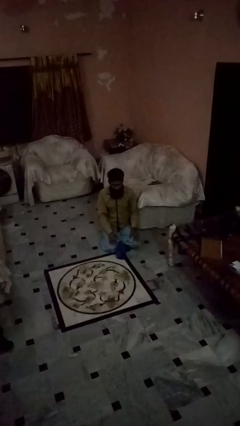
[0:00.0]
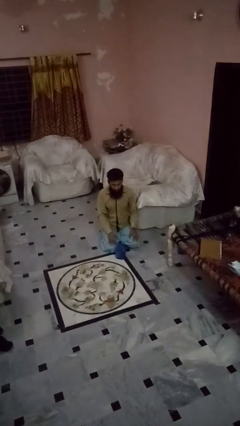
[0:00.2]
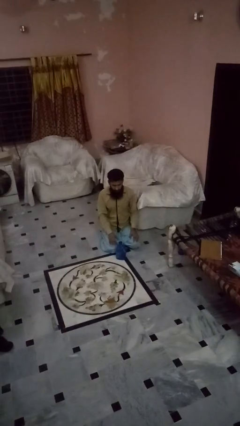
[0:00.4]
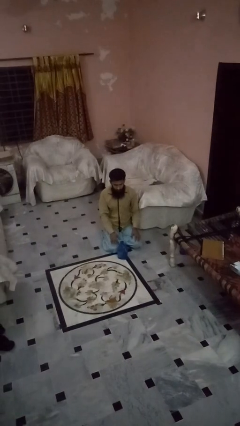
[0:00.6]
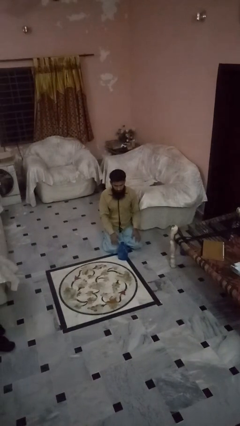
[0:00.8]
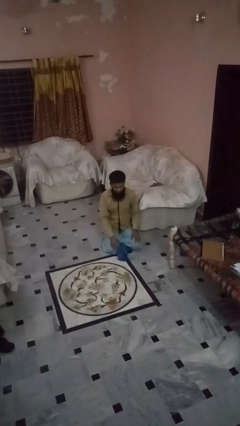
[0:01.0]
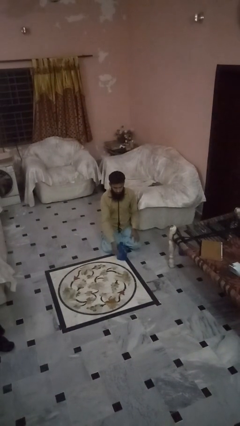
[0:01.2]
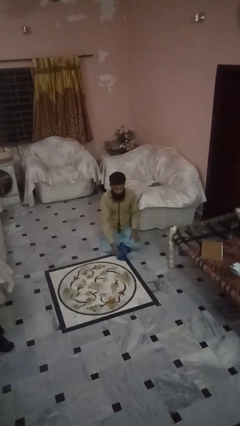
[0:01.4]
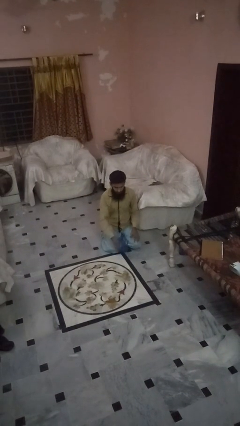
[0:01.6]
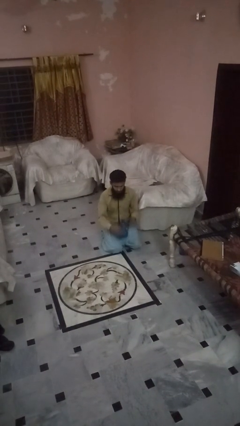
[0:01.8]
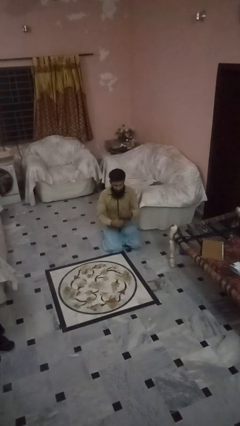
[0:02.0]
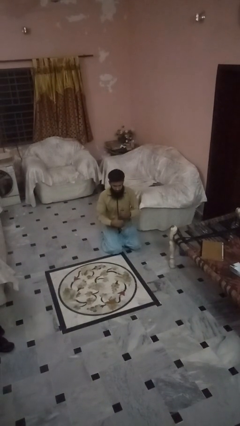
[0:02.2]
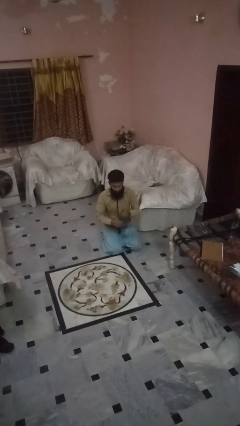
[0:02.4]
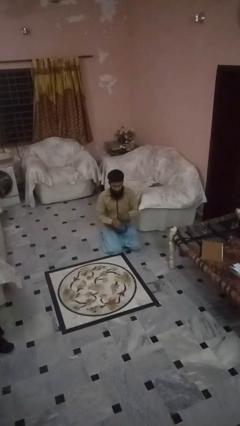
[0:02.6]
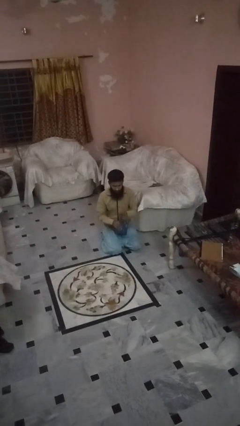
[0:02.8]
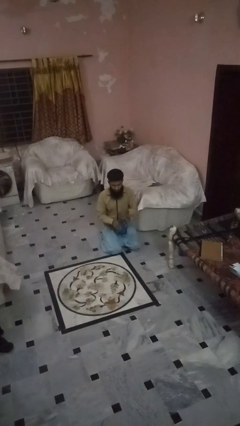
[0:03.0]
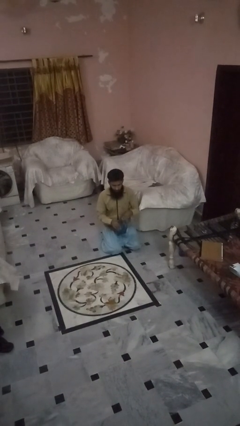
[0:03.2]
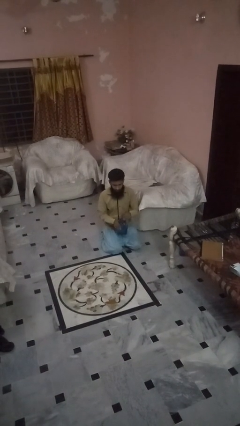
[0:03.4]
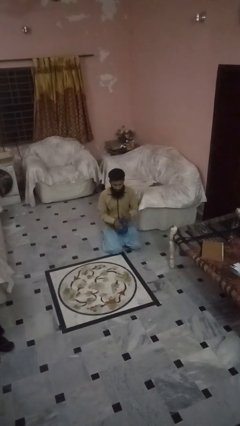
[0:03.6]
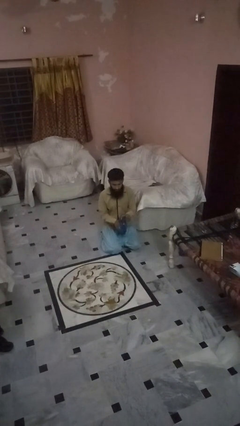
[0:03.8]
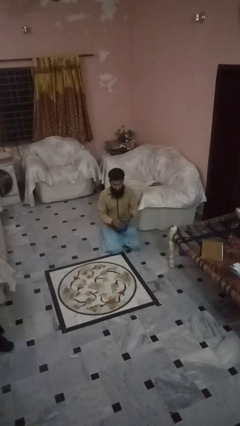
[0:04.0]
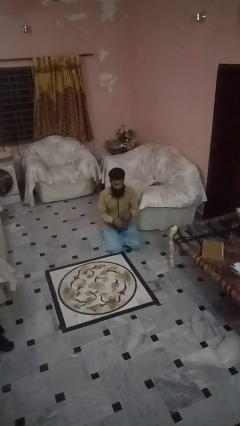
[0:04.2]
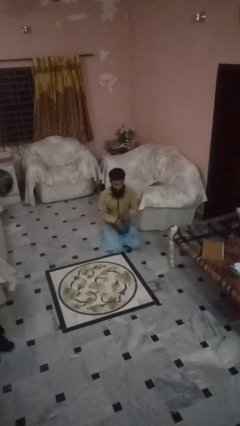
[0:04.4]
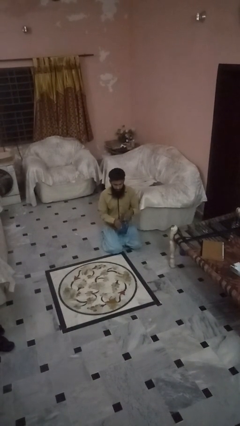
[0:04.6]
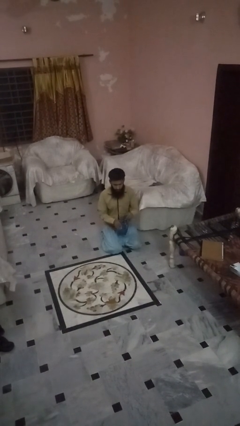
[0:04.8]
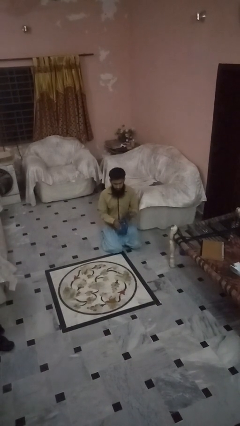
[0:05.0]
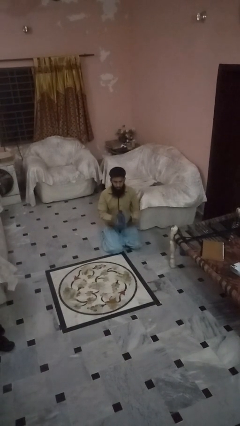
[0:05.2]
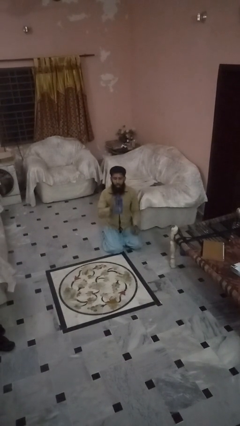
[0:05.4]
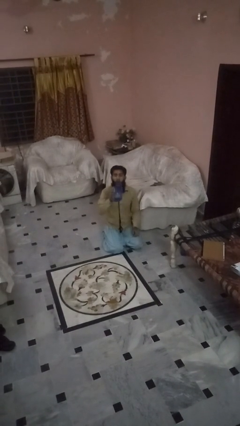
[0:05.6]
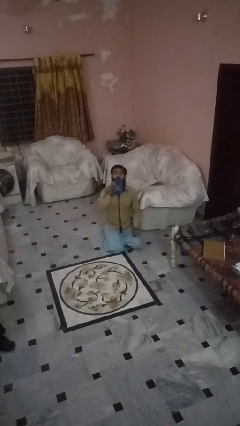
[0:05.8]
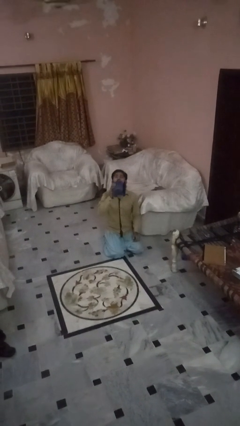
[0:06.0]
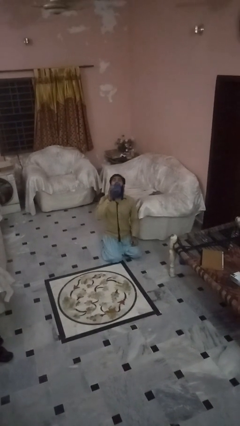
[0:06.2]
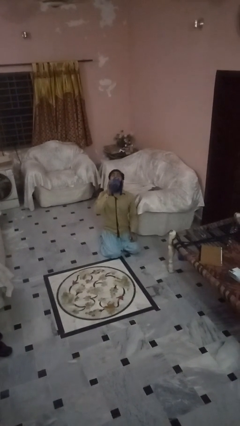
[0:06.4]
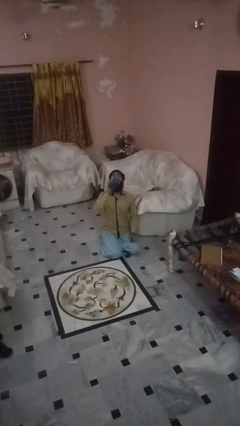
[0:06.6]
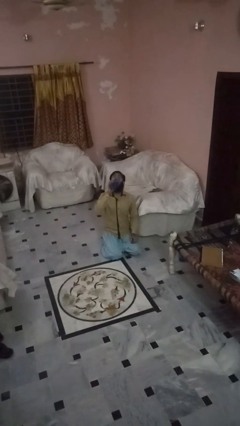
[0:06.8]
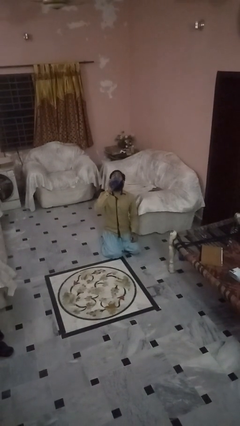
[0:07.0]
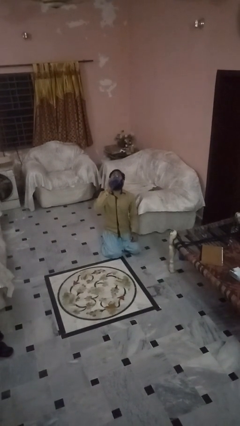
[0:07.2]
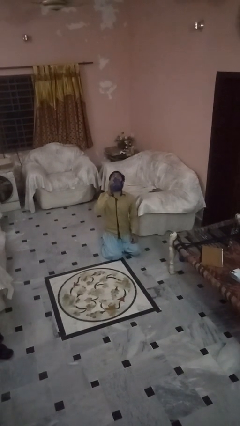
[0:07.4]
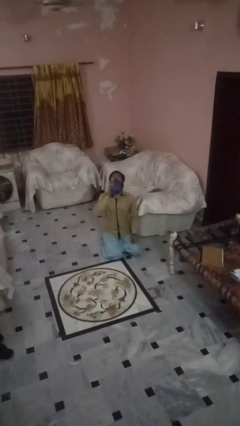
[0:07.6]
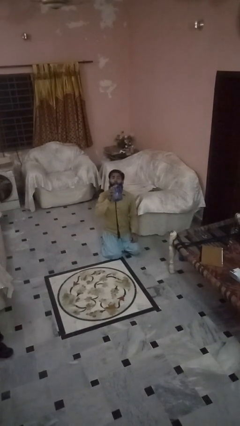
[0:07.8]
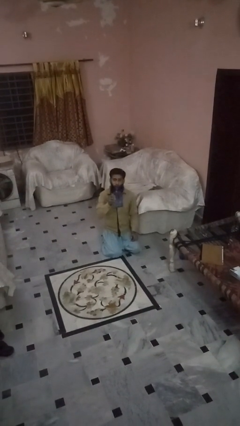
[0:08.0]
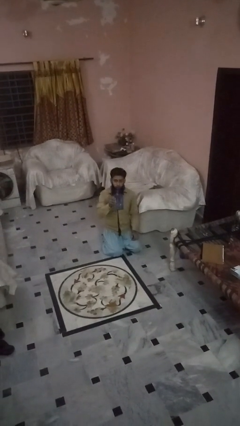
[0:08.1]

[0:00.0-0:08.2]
person drinks from bottle

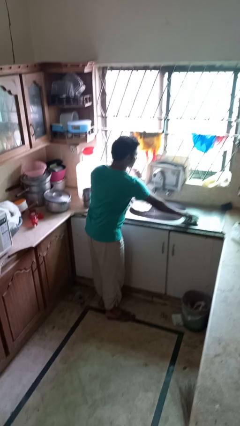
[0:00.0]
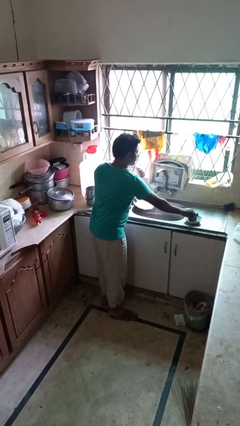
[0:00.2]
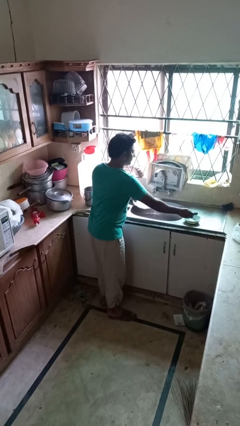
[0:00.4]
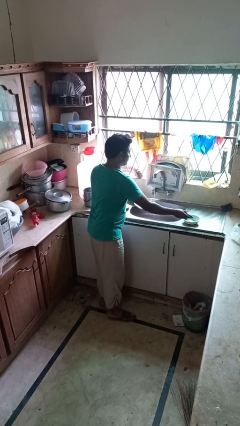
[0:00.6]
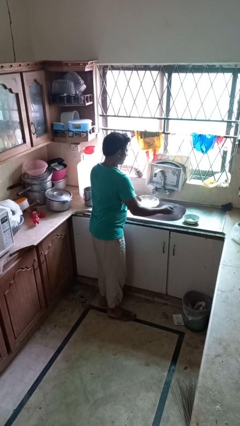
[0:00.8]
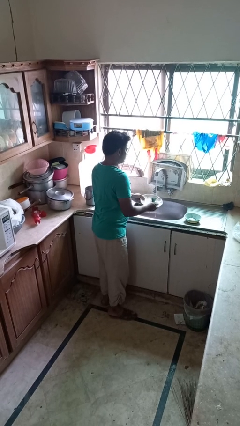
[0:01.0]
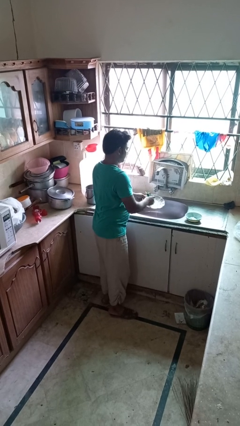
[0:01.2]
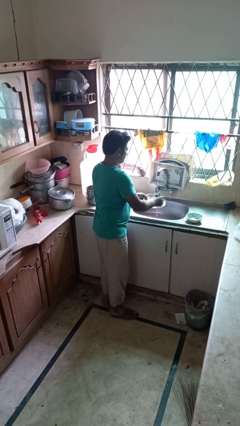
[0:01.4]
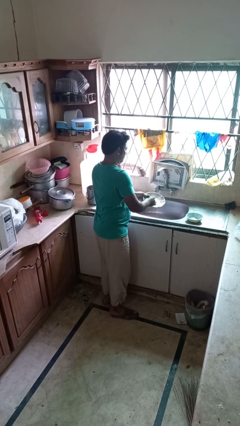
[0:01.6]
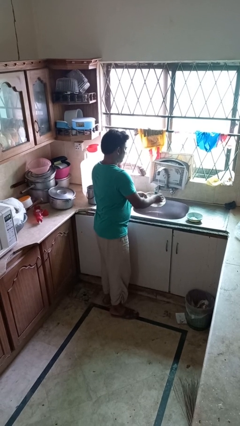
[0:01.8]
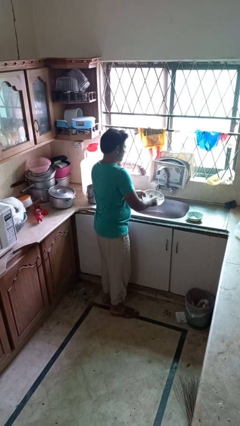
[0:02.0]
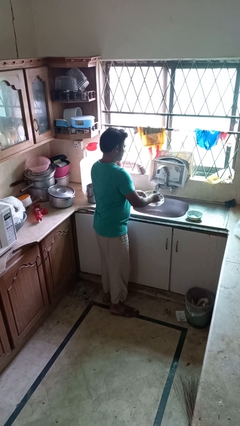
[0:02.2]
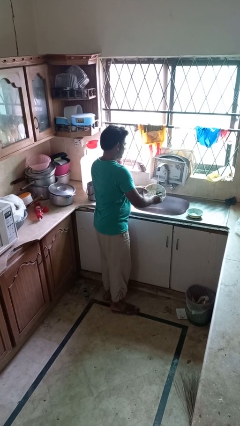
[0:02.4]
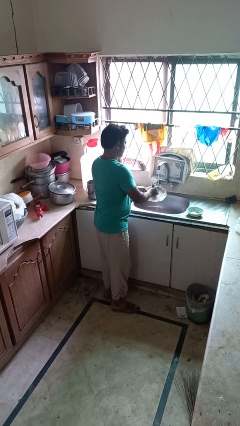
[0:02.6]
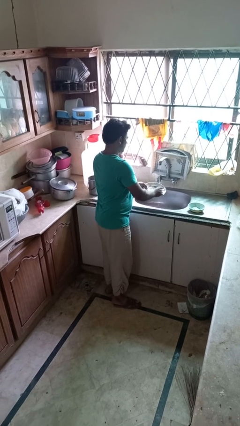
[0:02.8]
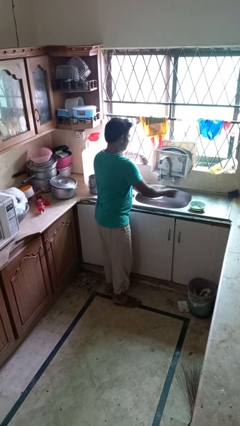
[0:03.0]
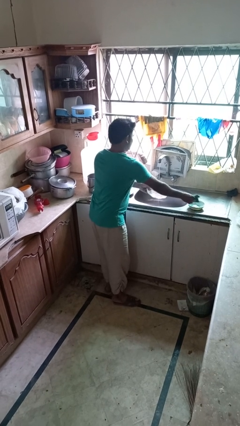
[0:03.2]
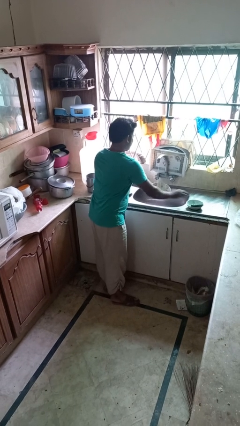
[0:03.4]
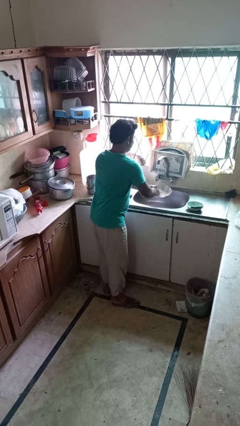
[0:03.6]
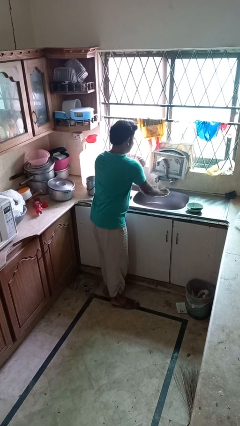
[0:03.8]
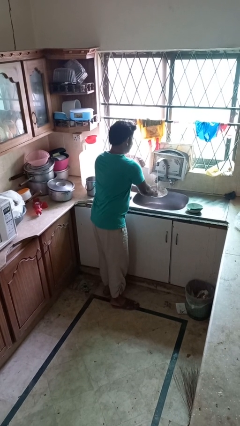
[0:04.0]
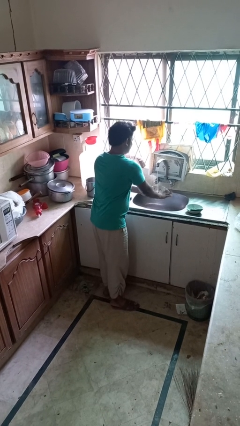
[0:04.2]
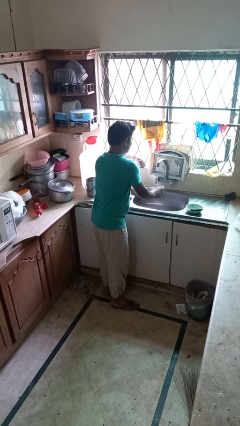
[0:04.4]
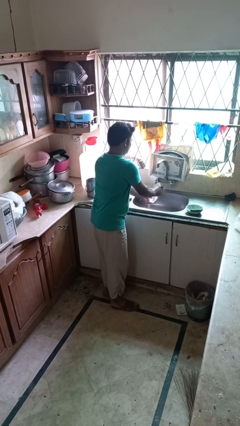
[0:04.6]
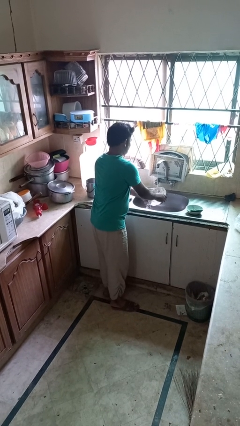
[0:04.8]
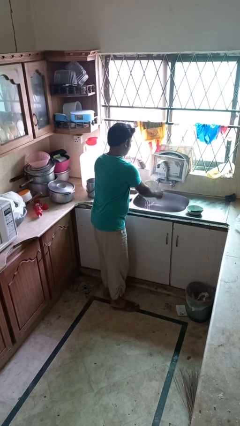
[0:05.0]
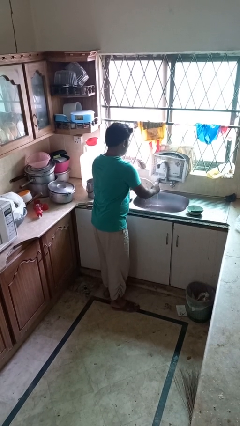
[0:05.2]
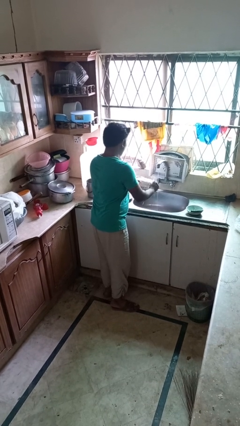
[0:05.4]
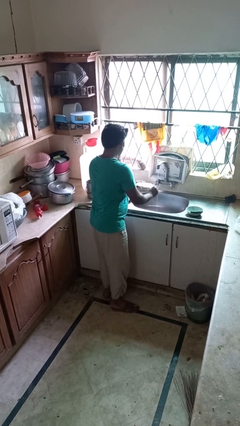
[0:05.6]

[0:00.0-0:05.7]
person washes dish

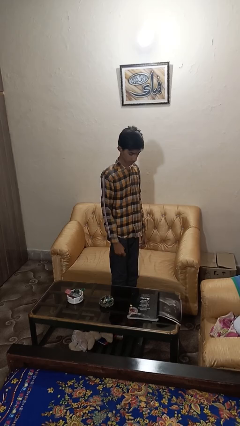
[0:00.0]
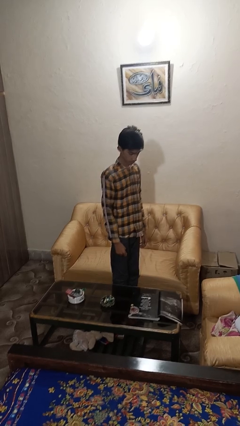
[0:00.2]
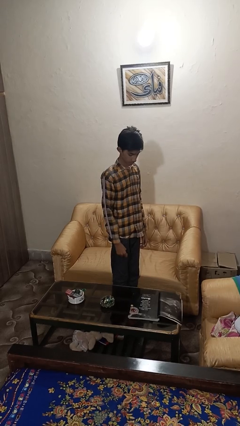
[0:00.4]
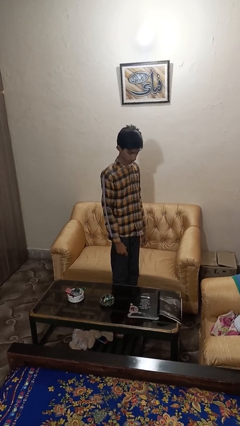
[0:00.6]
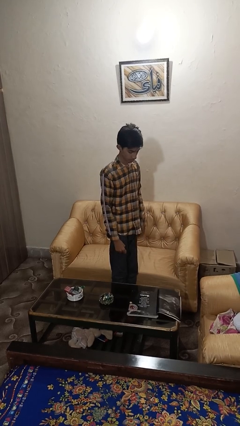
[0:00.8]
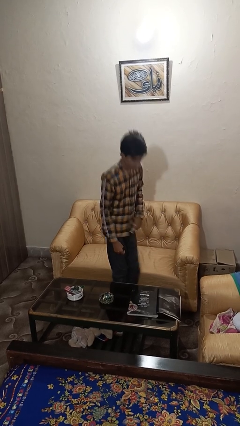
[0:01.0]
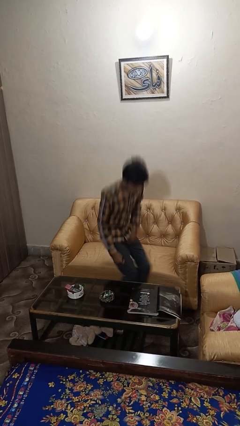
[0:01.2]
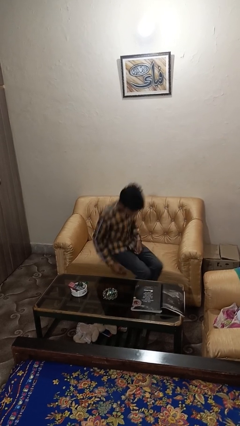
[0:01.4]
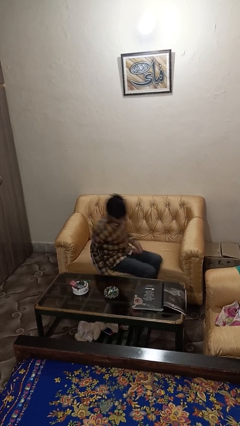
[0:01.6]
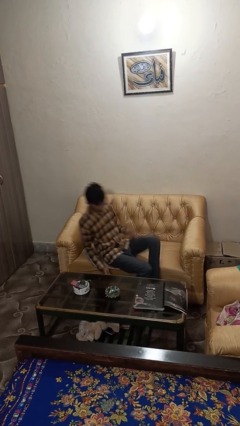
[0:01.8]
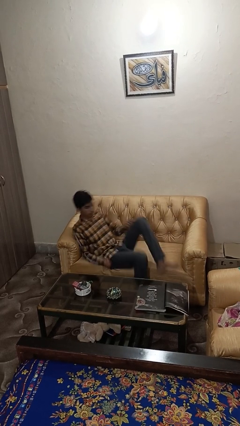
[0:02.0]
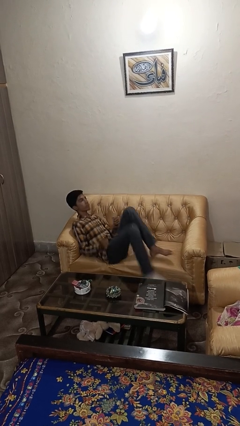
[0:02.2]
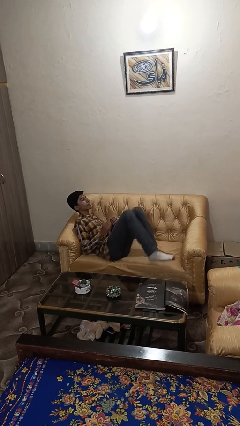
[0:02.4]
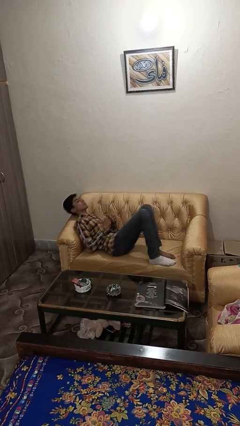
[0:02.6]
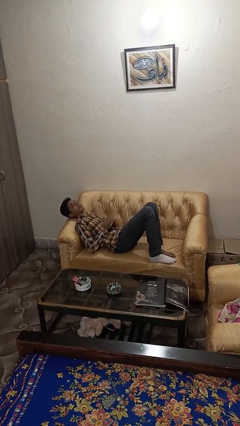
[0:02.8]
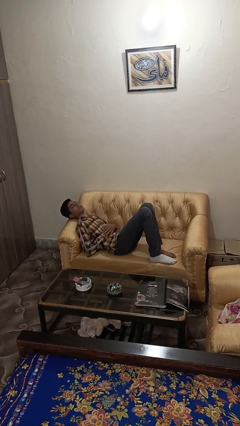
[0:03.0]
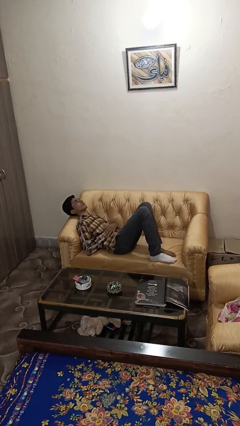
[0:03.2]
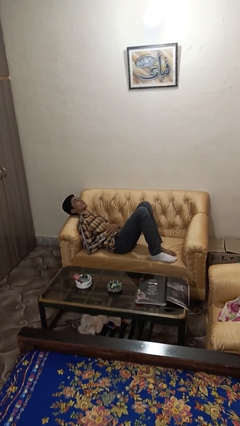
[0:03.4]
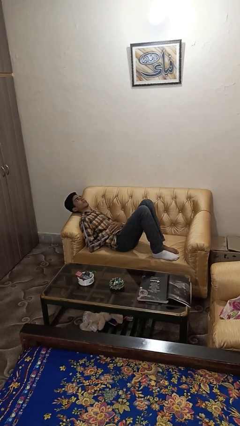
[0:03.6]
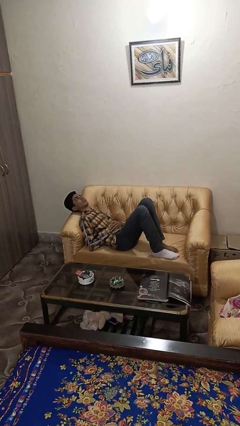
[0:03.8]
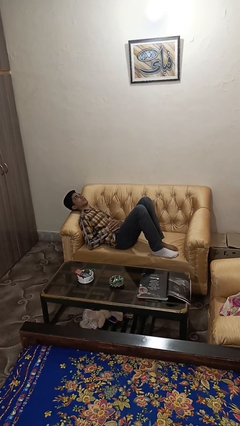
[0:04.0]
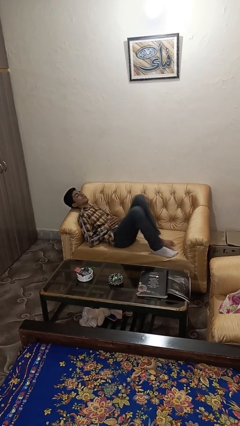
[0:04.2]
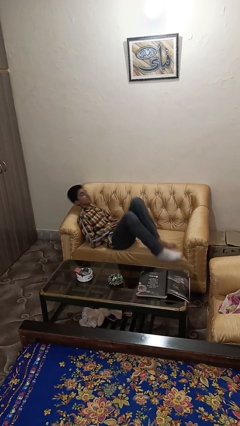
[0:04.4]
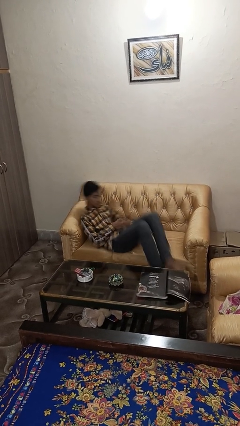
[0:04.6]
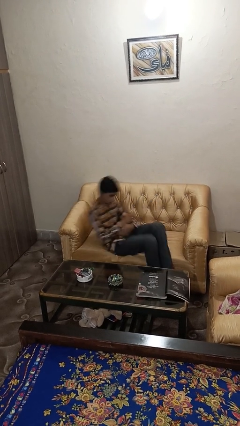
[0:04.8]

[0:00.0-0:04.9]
person lies down on couch
